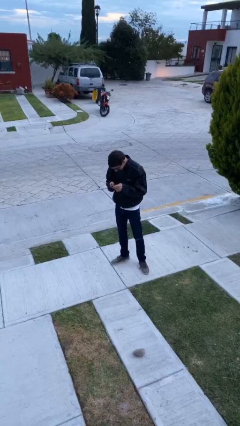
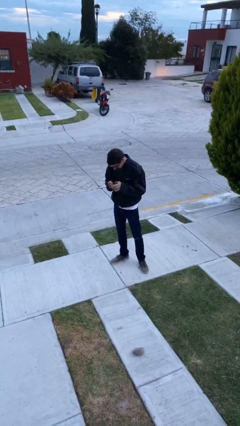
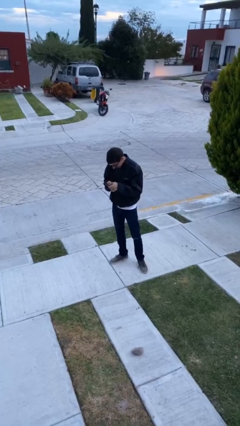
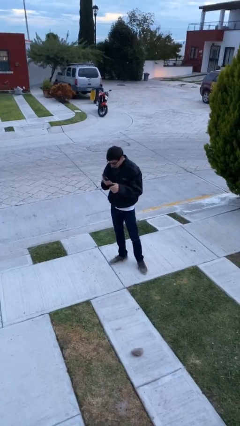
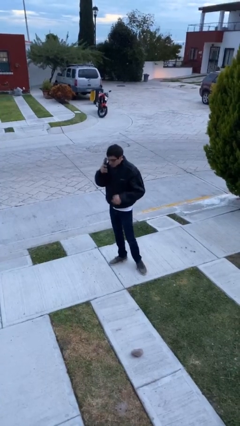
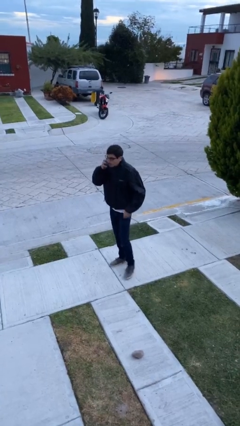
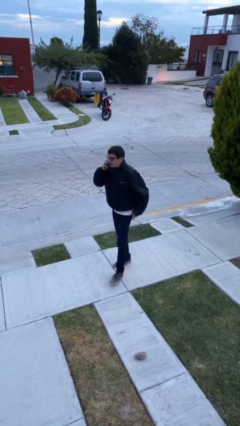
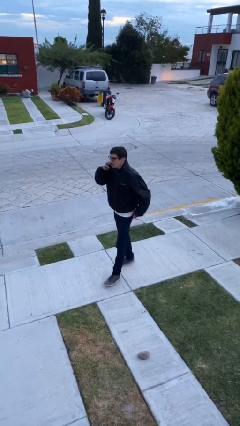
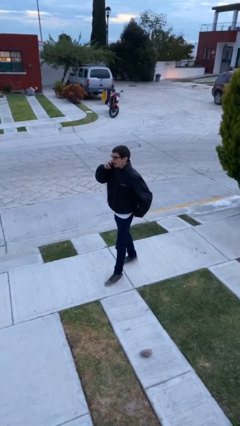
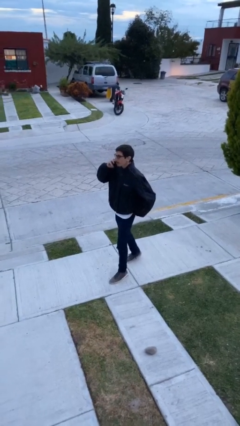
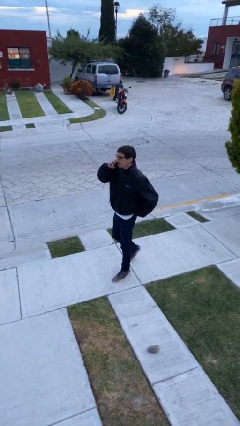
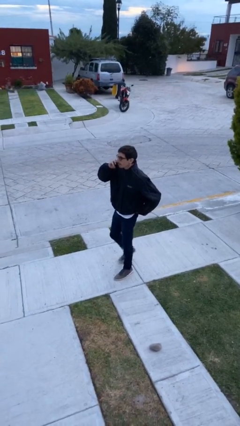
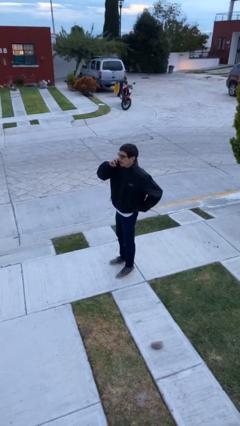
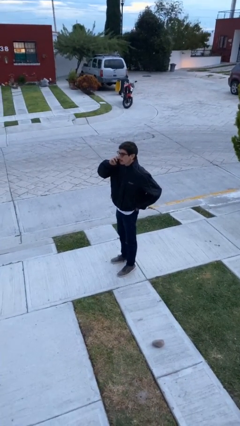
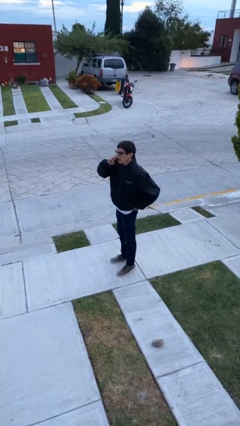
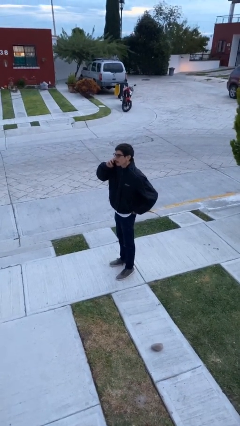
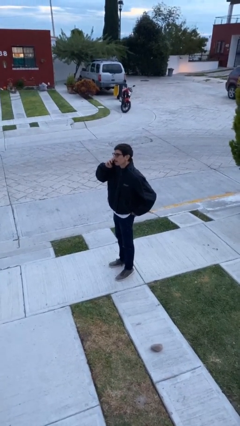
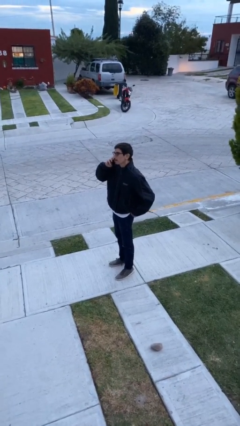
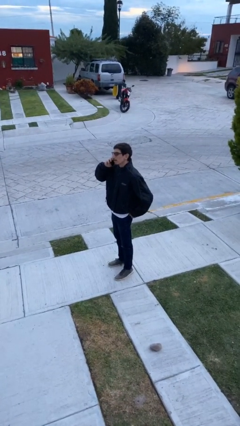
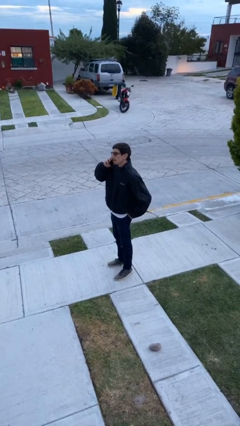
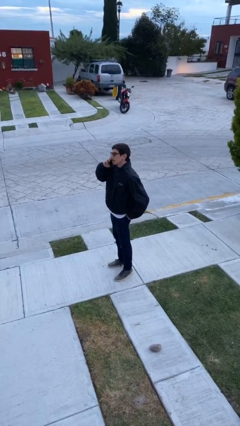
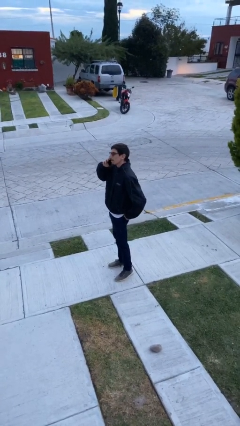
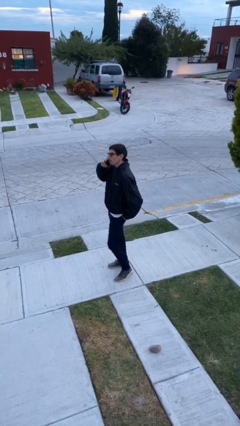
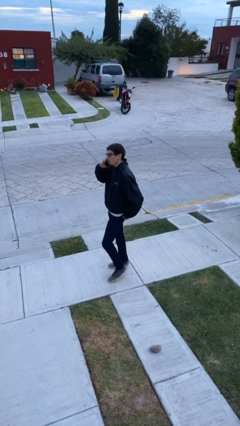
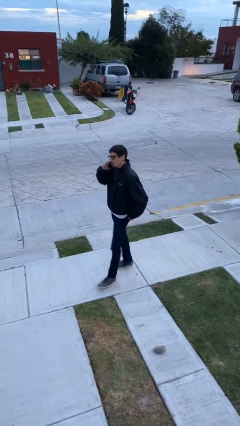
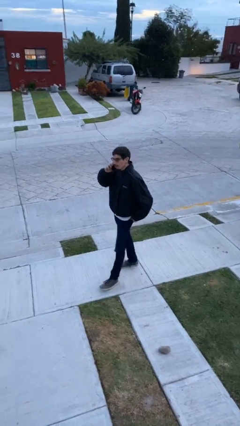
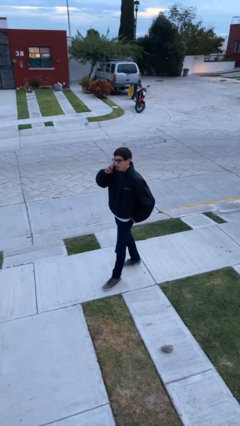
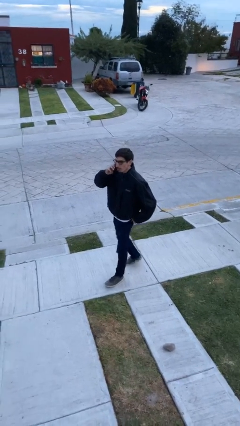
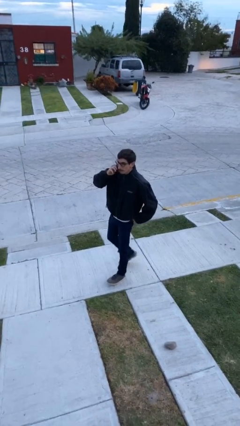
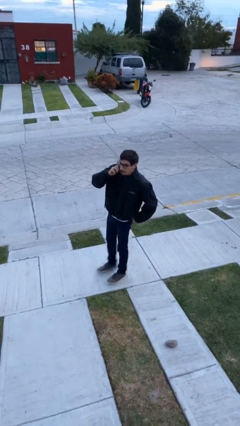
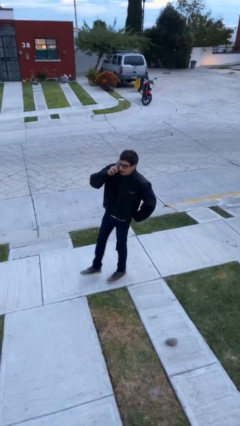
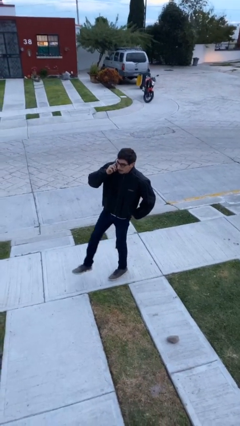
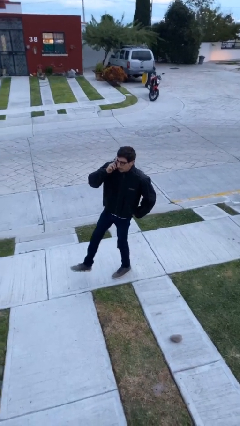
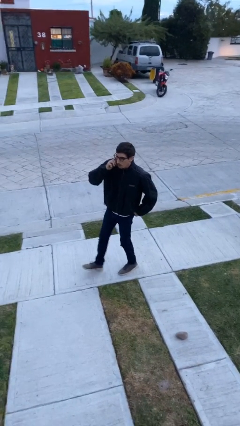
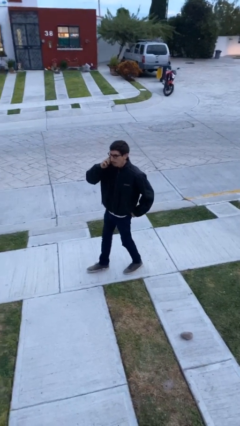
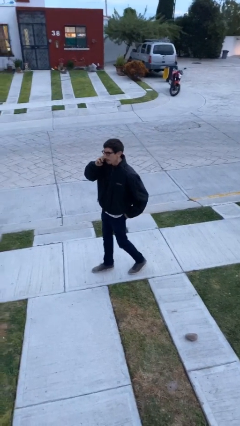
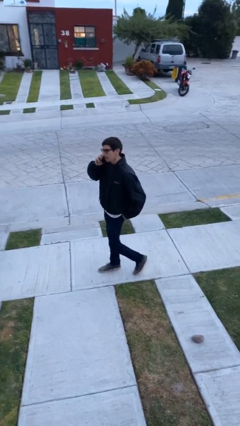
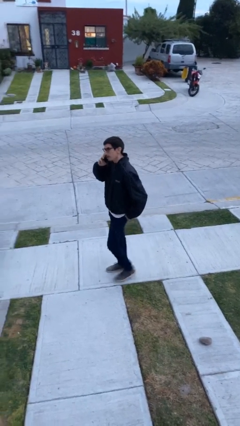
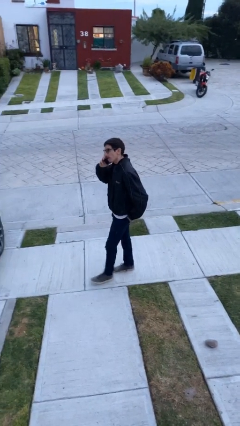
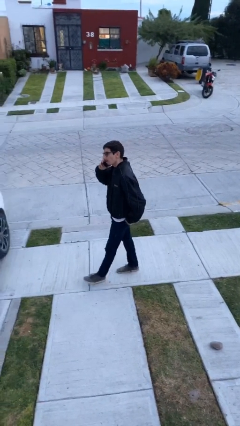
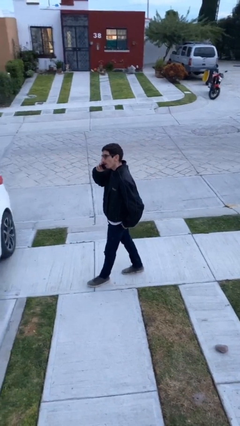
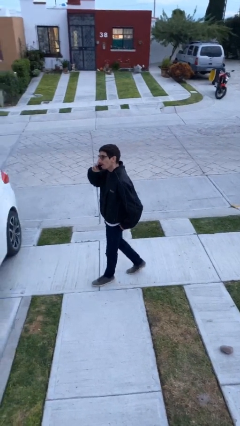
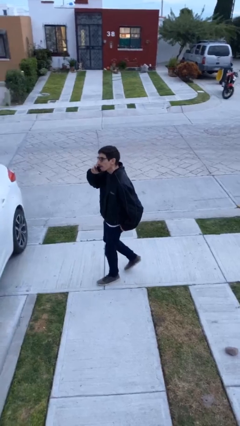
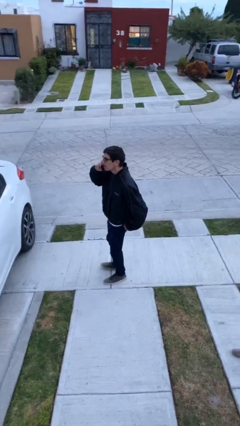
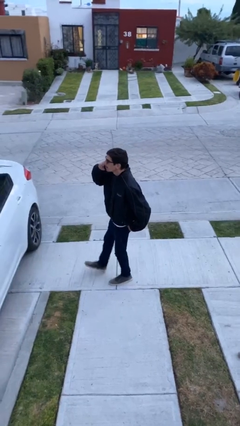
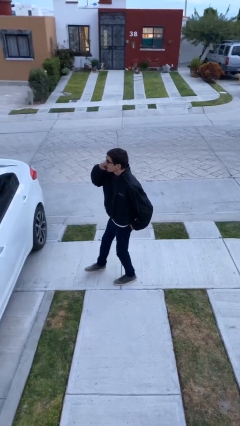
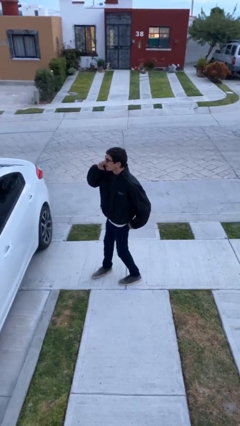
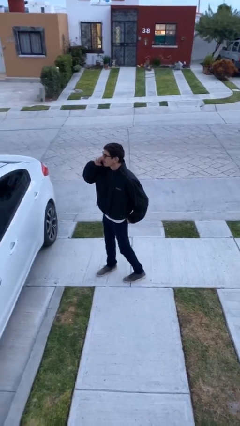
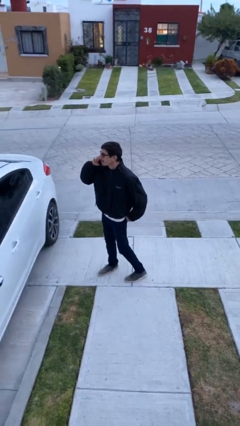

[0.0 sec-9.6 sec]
person talks on phone

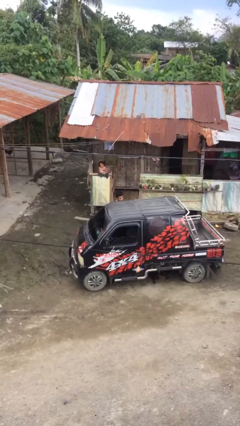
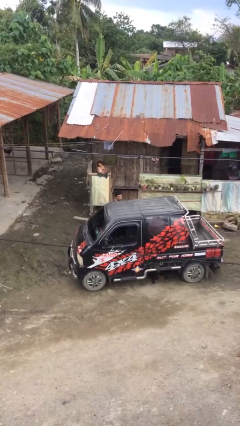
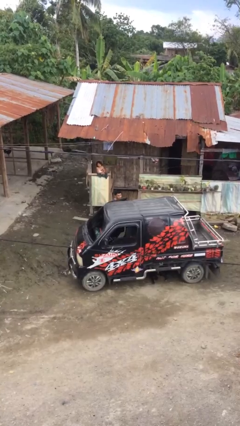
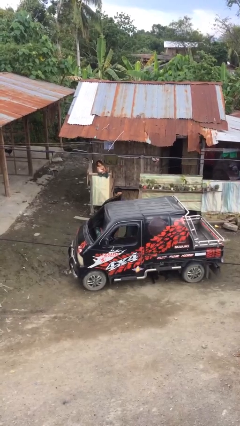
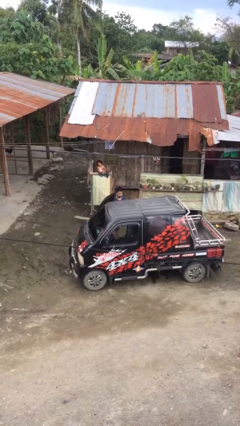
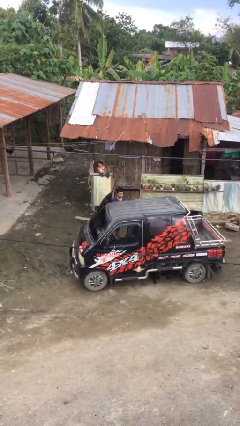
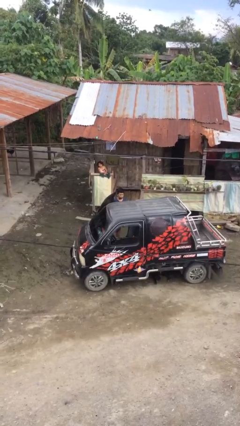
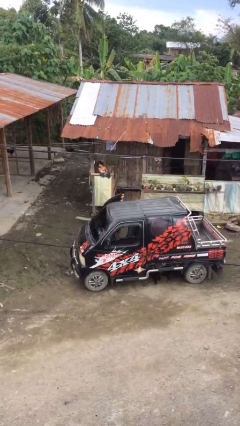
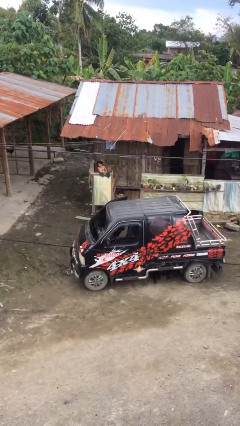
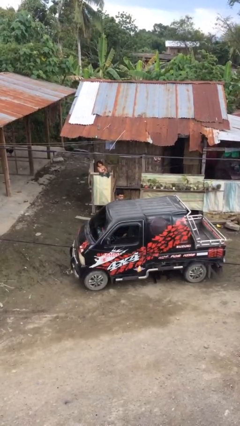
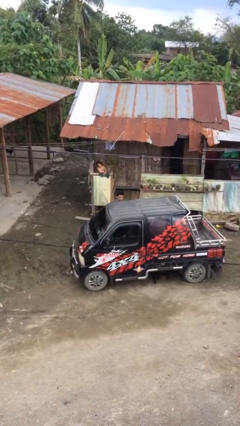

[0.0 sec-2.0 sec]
person opens car door

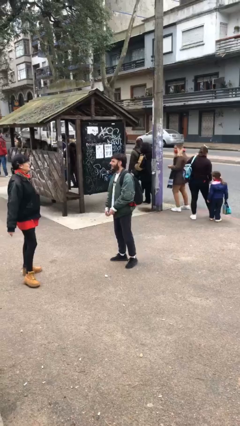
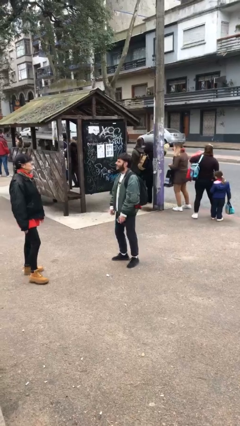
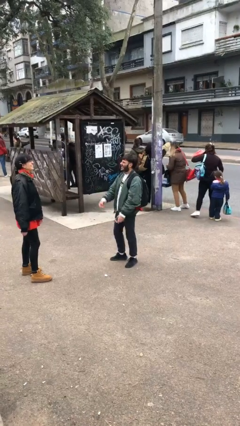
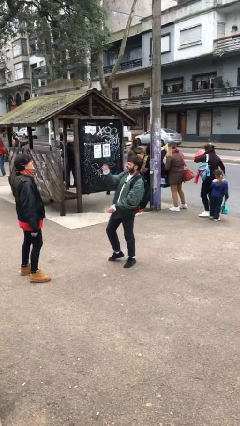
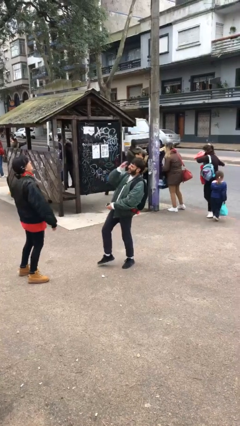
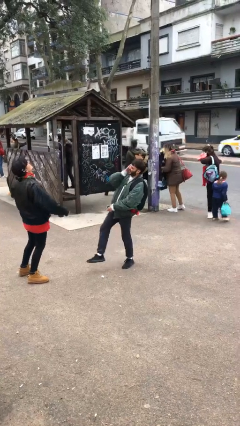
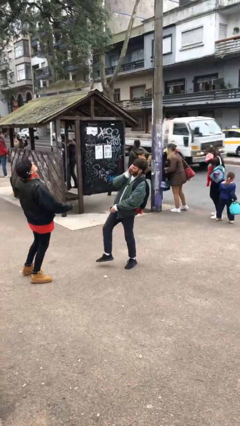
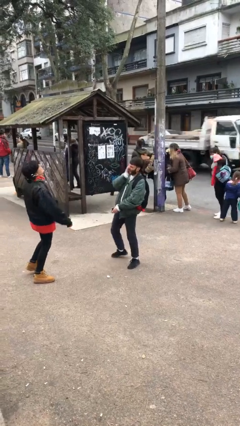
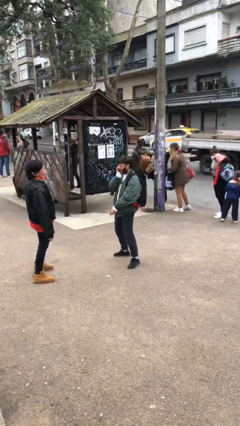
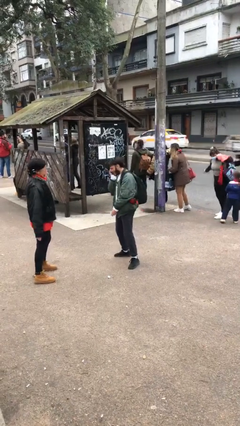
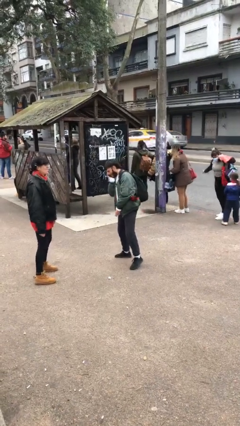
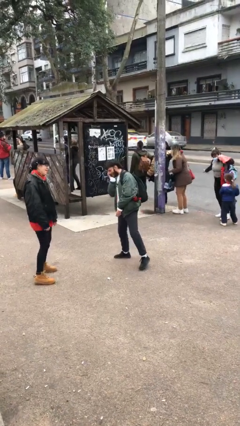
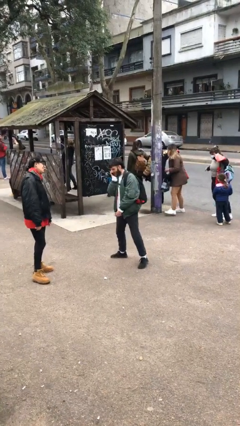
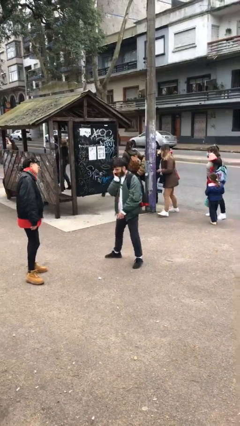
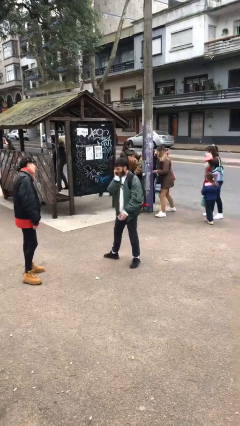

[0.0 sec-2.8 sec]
person laughs with person

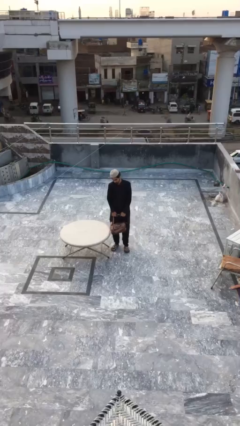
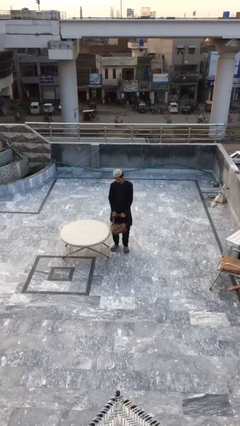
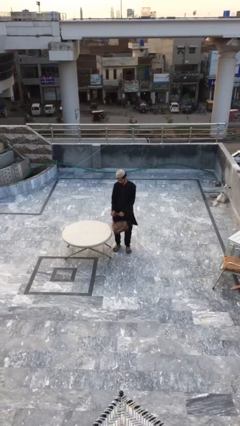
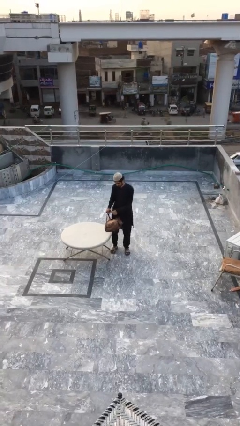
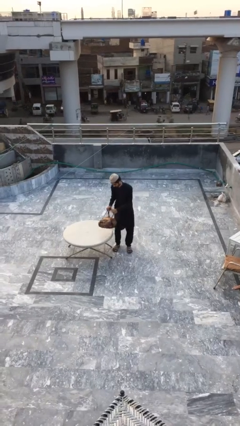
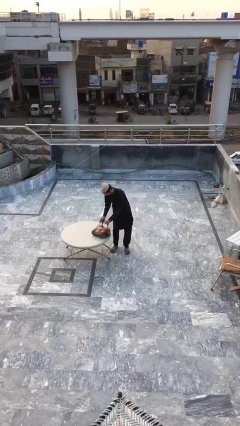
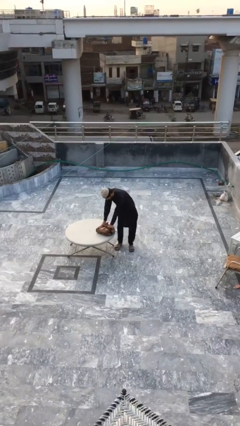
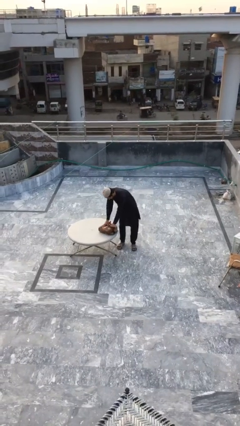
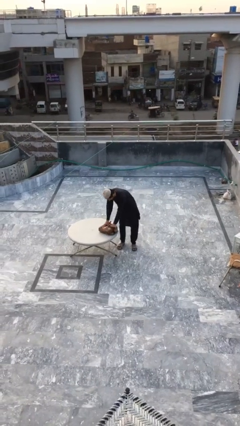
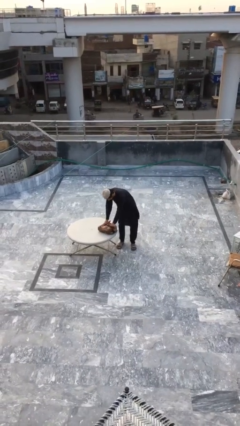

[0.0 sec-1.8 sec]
person puts down object on table

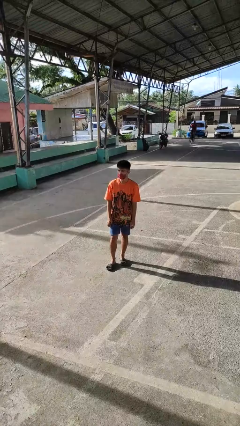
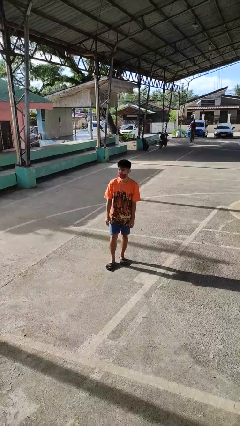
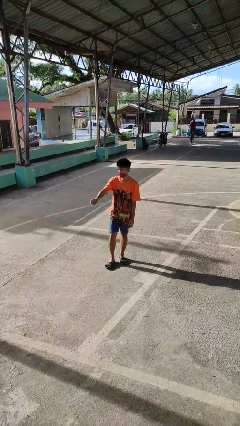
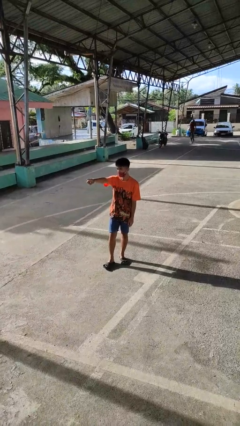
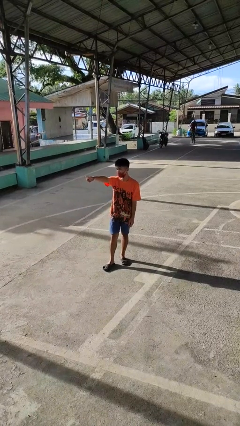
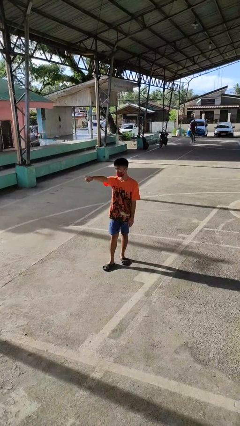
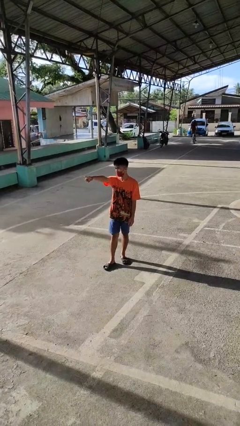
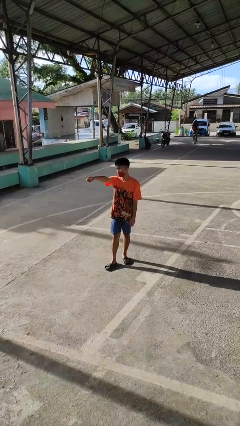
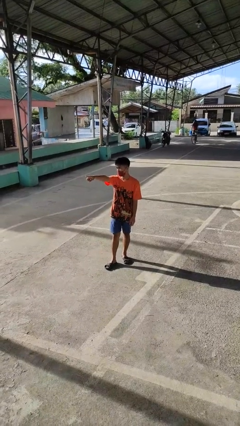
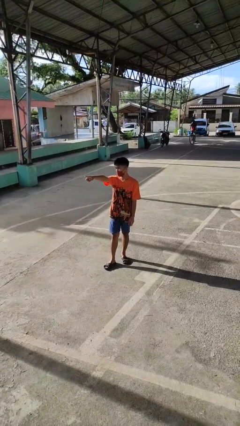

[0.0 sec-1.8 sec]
person points at person
